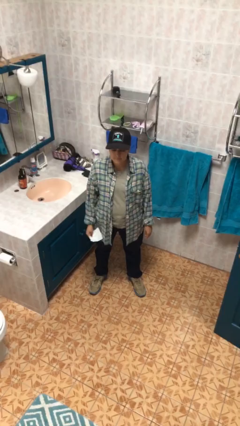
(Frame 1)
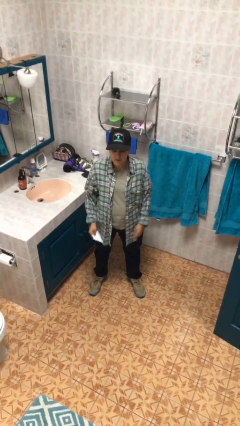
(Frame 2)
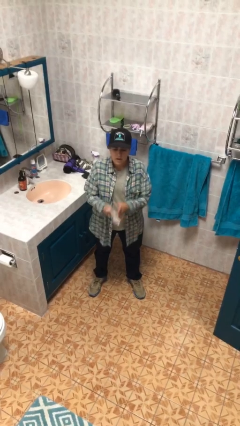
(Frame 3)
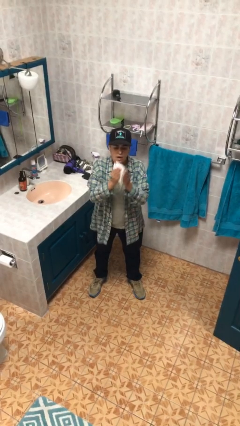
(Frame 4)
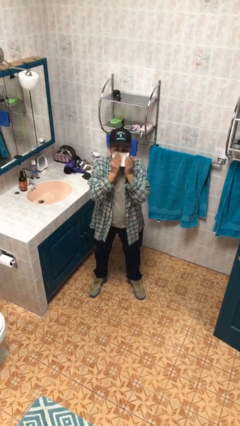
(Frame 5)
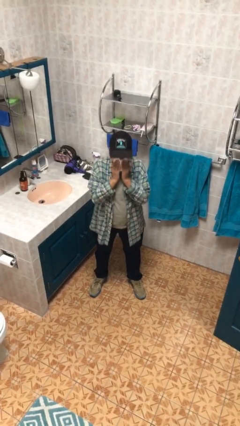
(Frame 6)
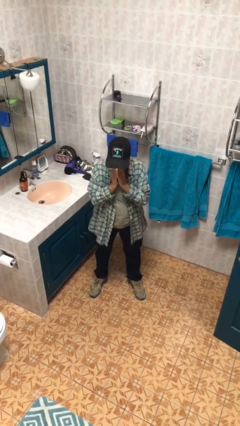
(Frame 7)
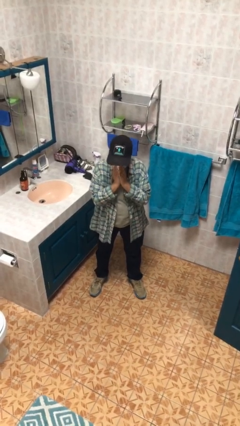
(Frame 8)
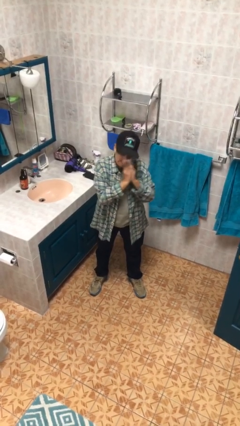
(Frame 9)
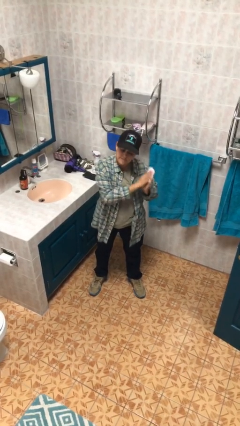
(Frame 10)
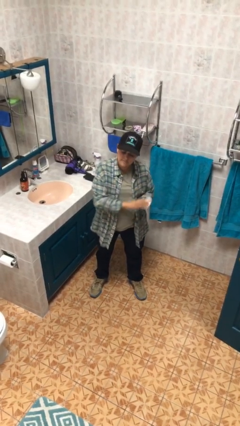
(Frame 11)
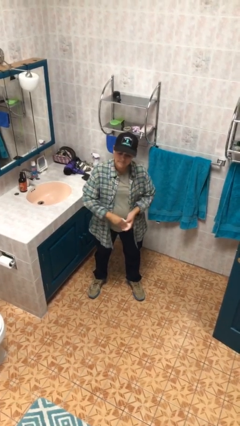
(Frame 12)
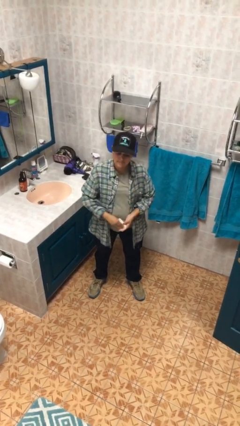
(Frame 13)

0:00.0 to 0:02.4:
person blows nose

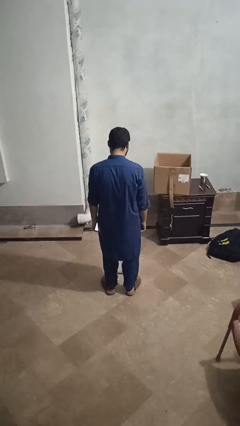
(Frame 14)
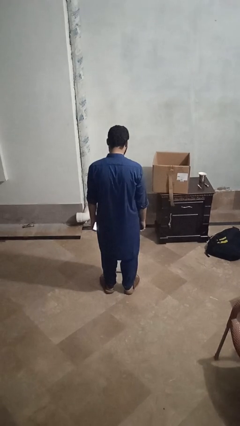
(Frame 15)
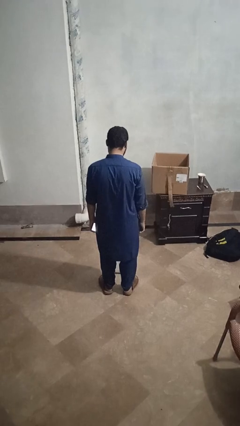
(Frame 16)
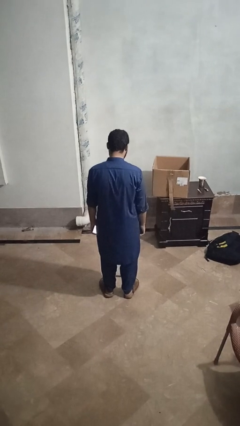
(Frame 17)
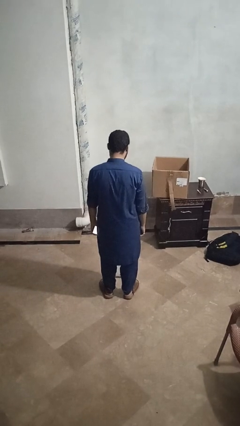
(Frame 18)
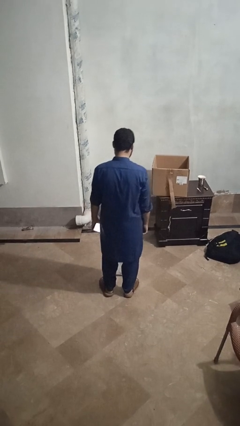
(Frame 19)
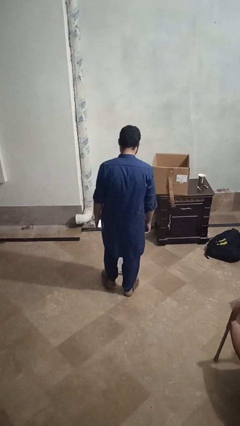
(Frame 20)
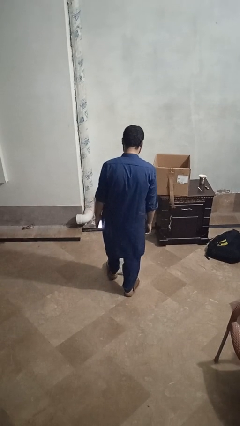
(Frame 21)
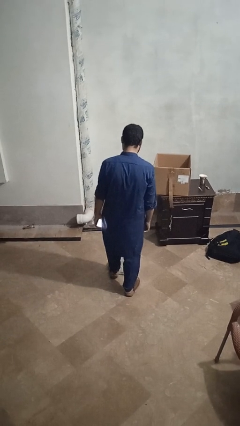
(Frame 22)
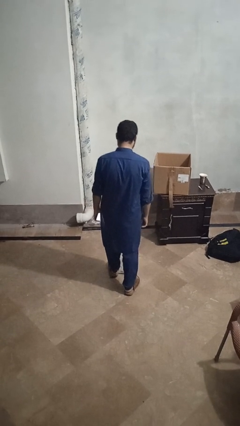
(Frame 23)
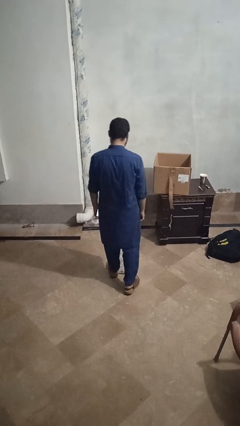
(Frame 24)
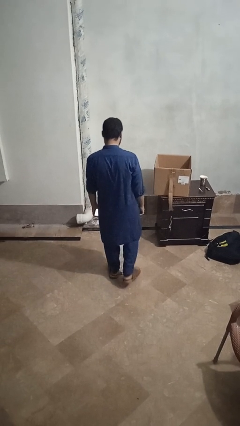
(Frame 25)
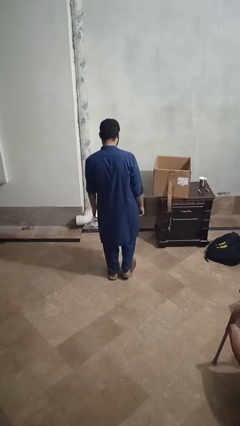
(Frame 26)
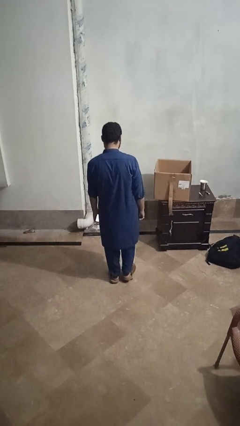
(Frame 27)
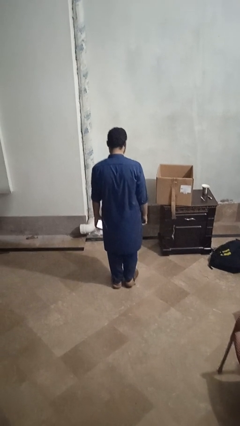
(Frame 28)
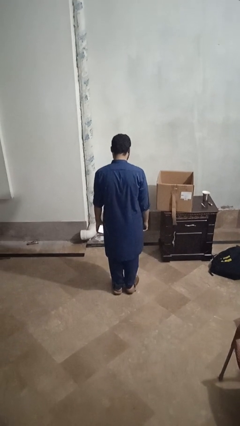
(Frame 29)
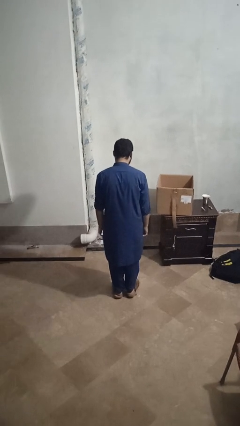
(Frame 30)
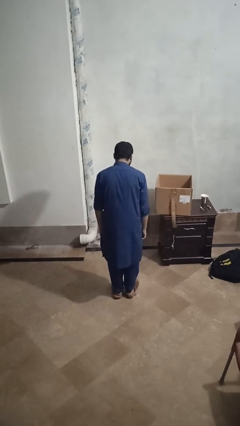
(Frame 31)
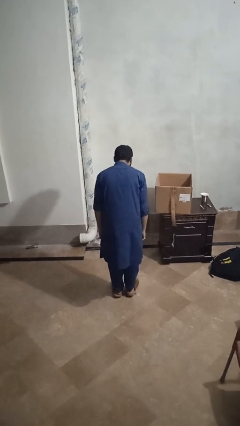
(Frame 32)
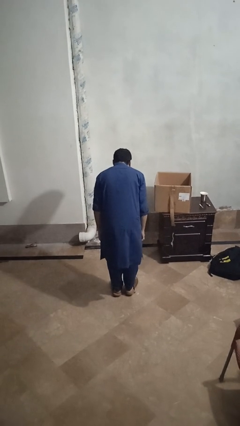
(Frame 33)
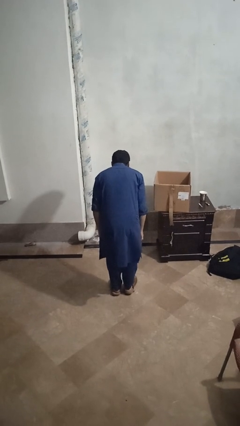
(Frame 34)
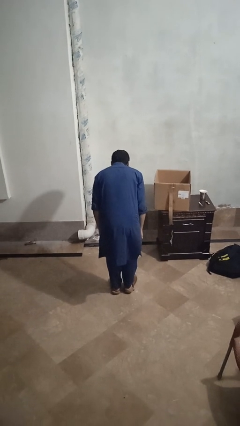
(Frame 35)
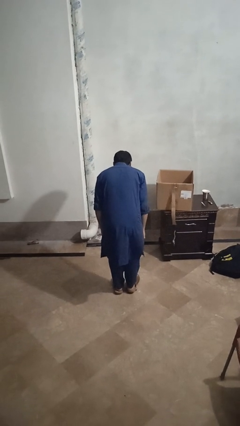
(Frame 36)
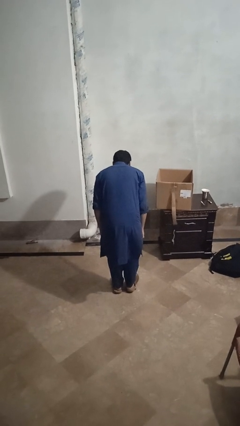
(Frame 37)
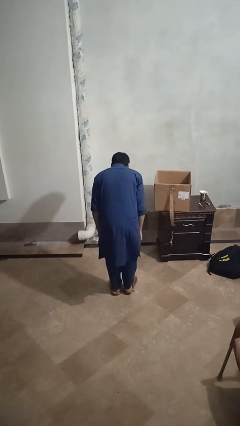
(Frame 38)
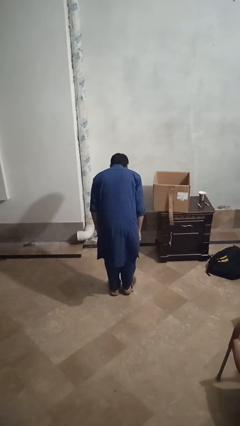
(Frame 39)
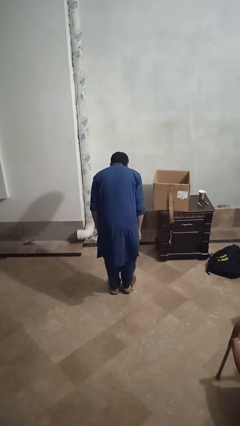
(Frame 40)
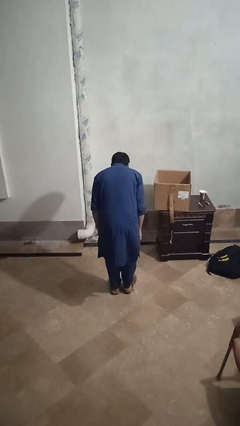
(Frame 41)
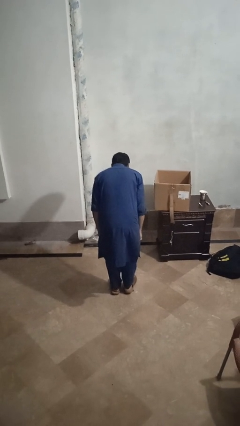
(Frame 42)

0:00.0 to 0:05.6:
person uses bodyweight scale

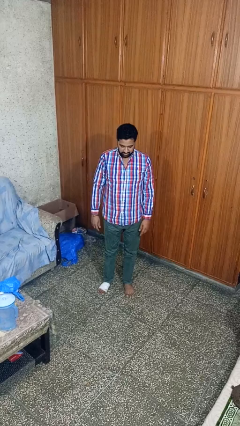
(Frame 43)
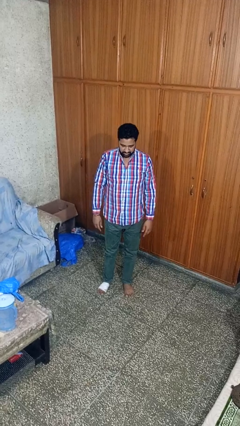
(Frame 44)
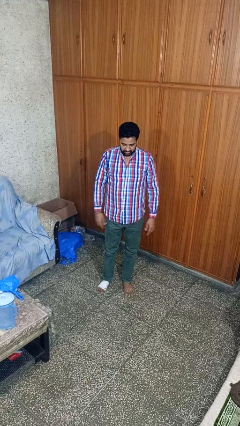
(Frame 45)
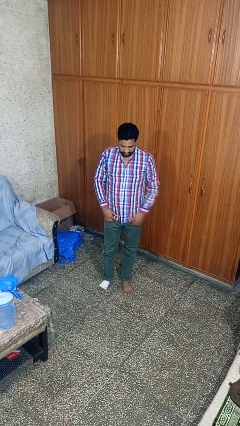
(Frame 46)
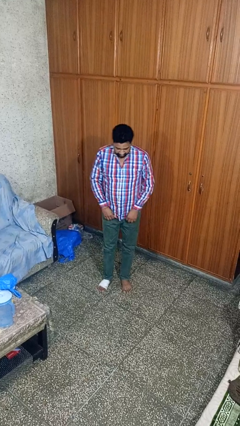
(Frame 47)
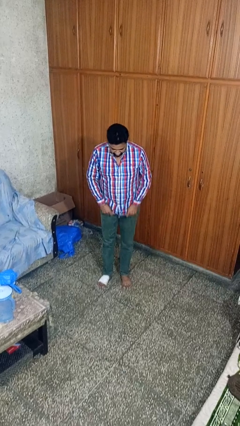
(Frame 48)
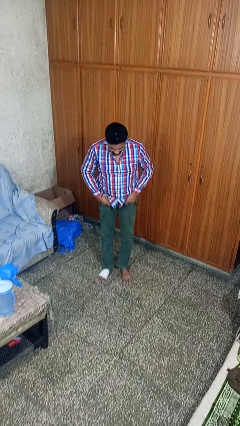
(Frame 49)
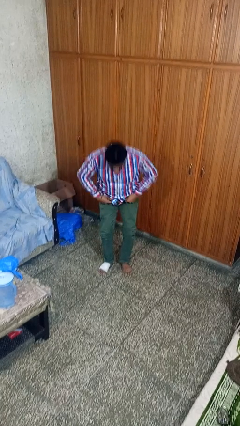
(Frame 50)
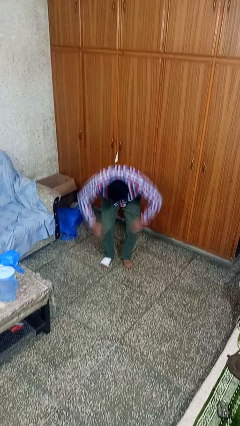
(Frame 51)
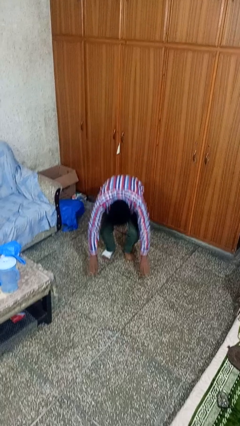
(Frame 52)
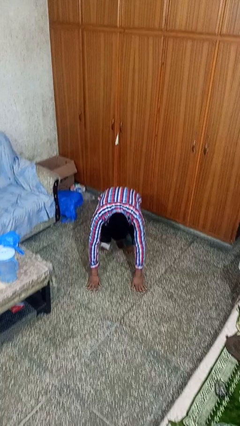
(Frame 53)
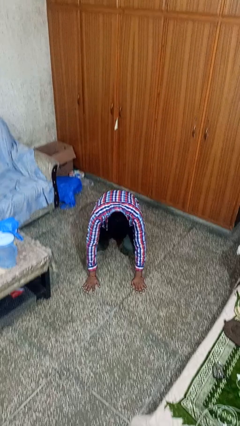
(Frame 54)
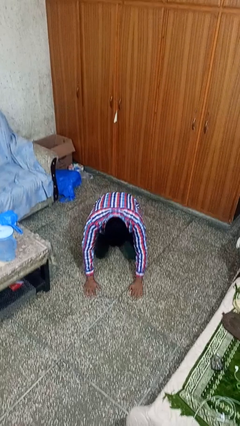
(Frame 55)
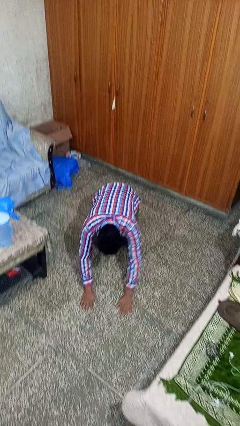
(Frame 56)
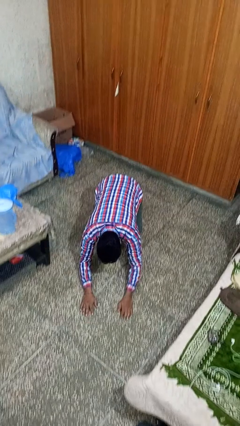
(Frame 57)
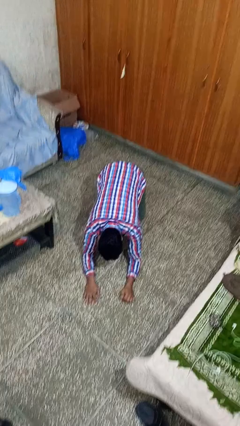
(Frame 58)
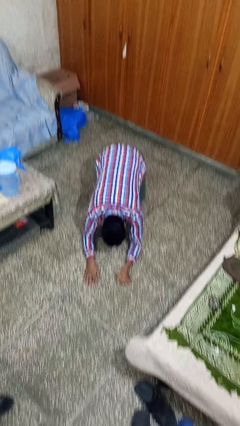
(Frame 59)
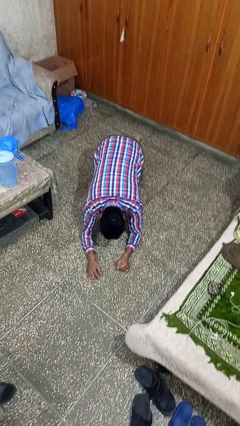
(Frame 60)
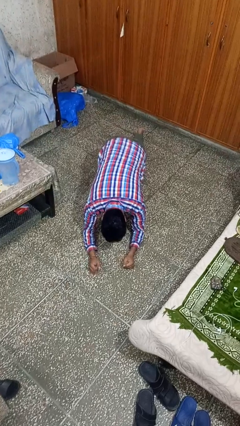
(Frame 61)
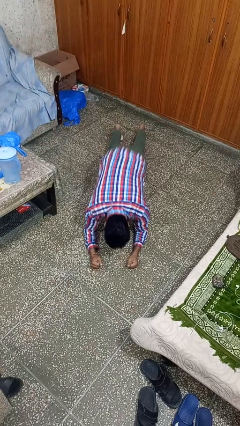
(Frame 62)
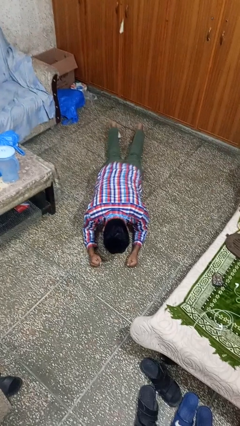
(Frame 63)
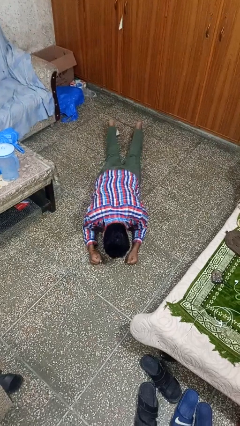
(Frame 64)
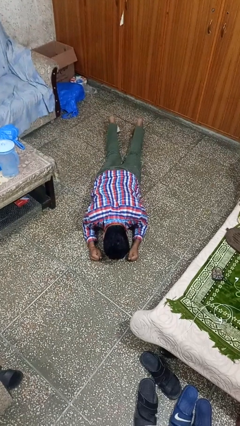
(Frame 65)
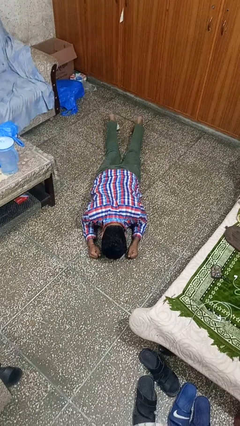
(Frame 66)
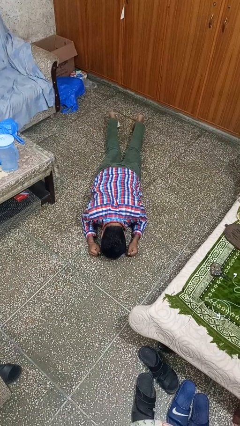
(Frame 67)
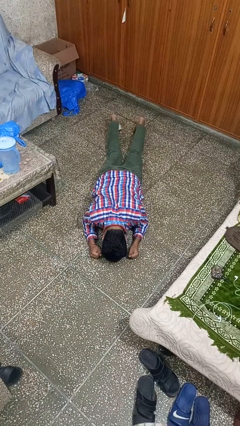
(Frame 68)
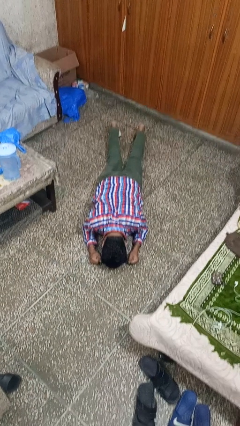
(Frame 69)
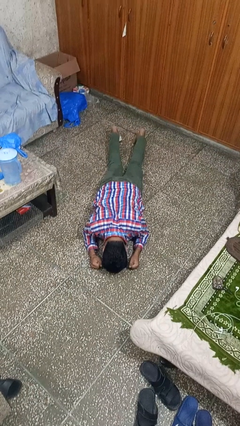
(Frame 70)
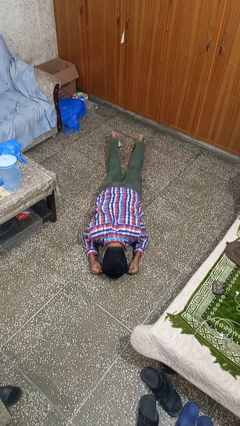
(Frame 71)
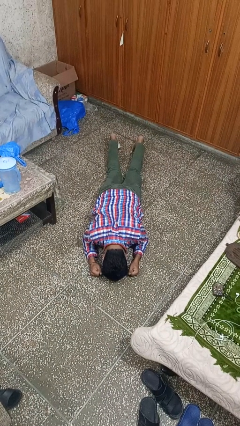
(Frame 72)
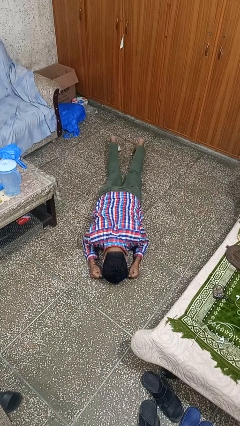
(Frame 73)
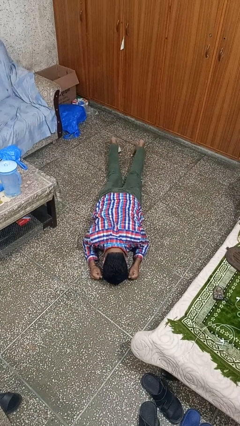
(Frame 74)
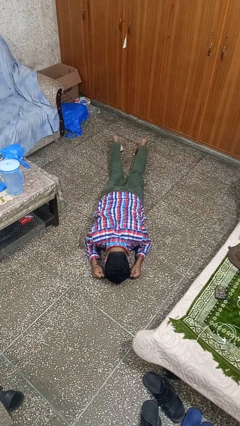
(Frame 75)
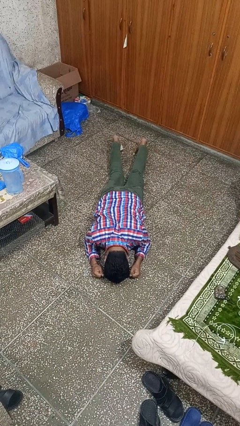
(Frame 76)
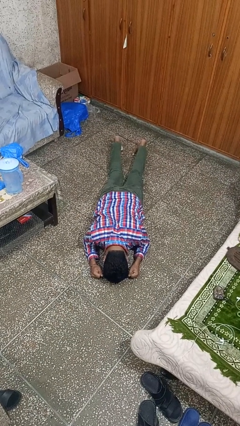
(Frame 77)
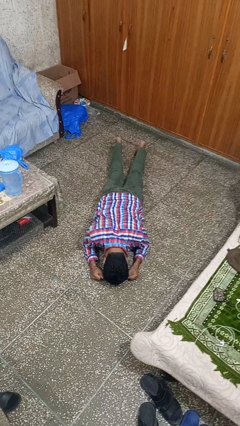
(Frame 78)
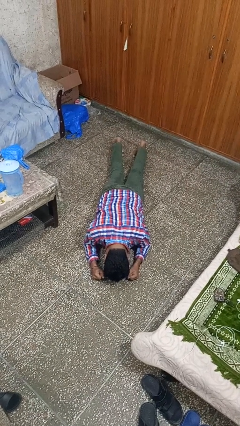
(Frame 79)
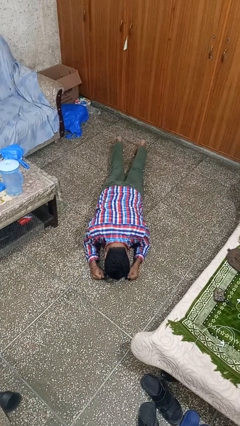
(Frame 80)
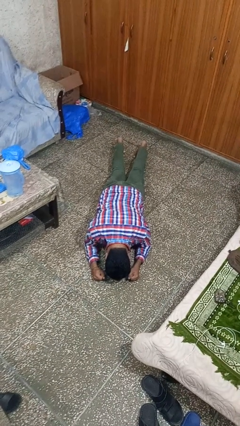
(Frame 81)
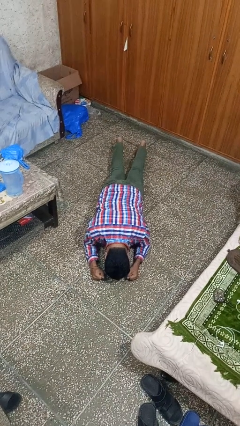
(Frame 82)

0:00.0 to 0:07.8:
person exercises with plank

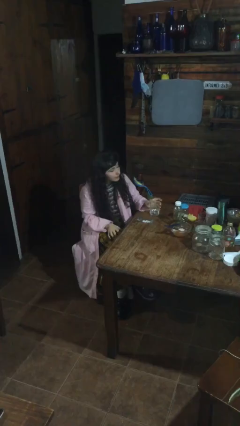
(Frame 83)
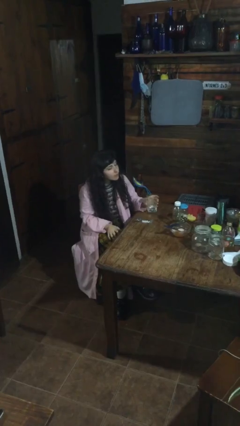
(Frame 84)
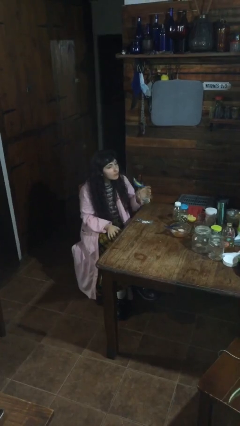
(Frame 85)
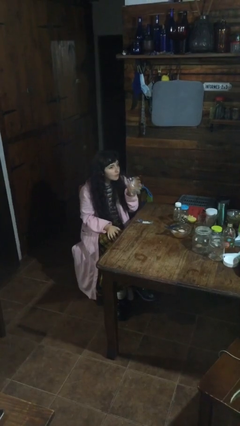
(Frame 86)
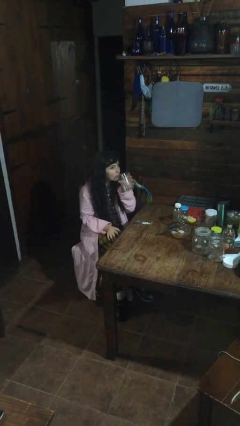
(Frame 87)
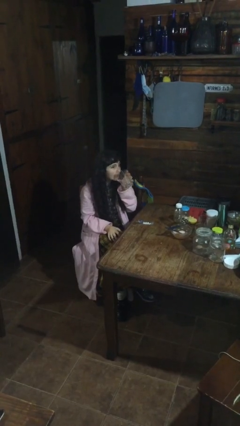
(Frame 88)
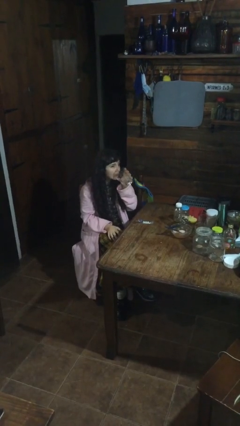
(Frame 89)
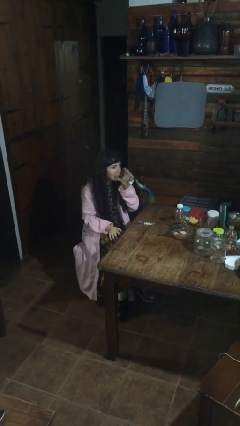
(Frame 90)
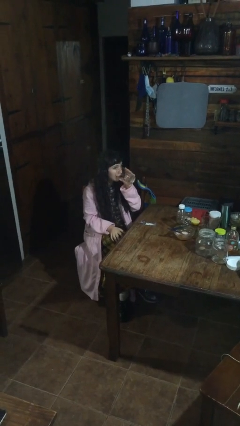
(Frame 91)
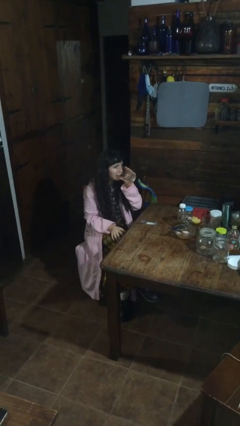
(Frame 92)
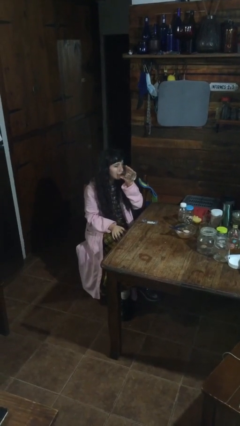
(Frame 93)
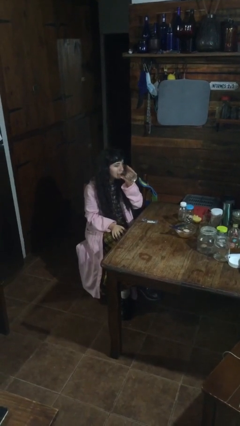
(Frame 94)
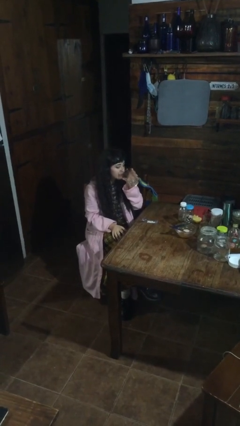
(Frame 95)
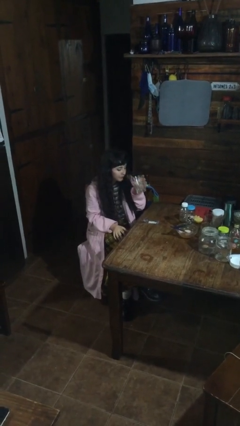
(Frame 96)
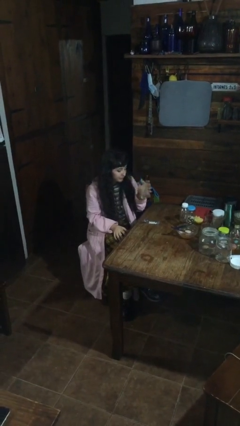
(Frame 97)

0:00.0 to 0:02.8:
person drinks from cup
